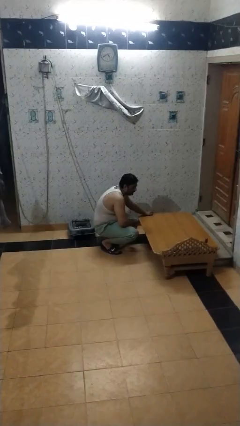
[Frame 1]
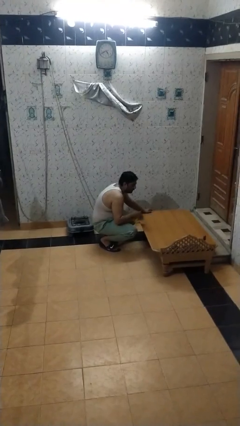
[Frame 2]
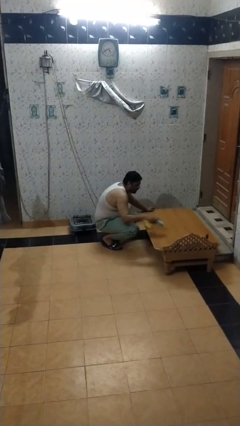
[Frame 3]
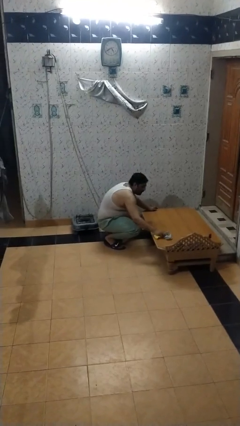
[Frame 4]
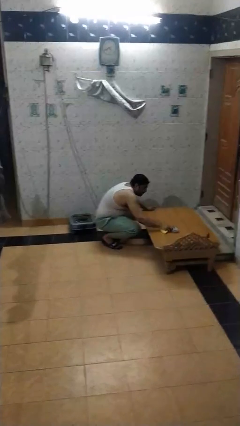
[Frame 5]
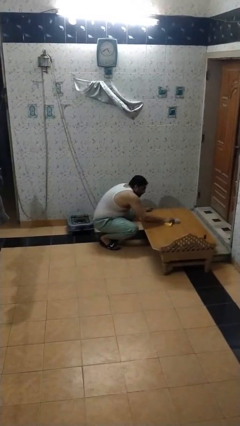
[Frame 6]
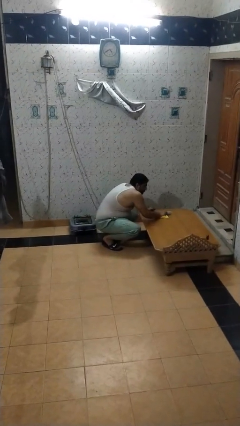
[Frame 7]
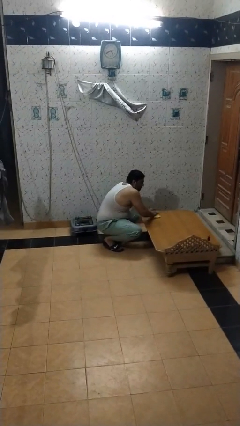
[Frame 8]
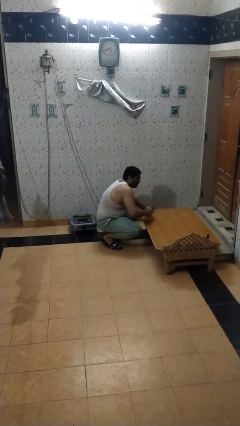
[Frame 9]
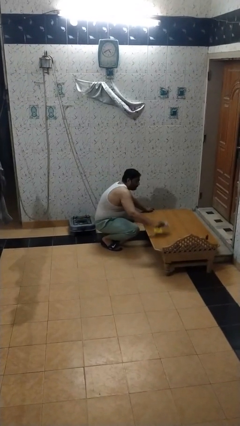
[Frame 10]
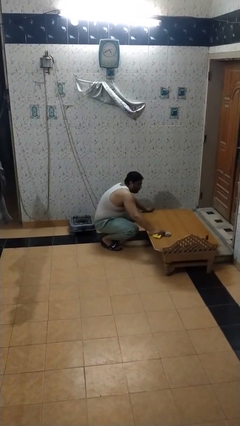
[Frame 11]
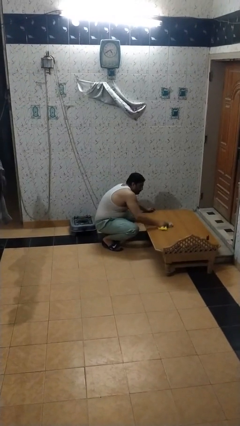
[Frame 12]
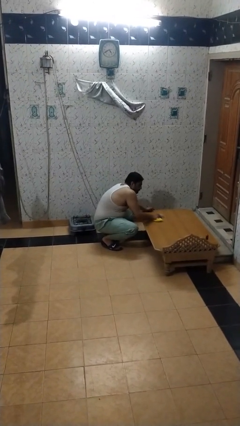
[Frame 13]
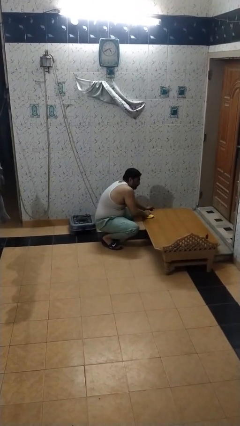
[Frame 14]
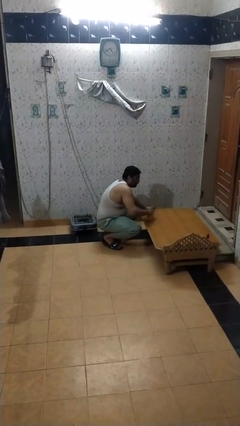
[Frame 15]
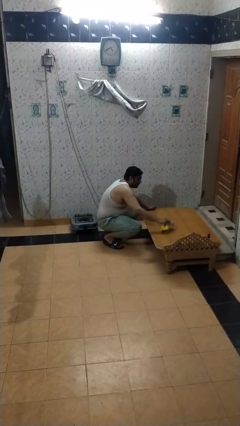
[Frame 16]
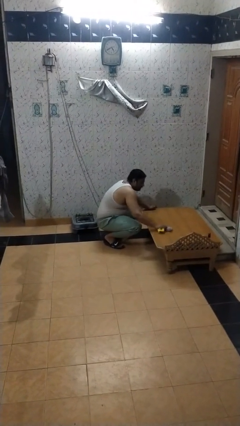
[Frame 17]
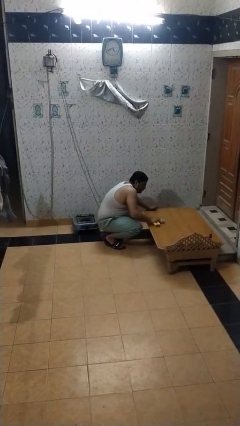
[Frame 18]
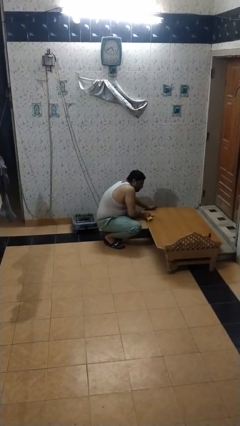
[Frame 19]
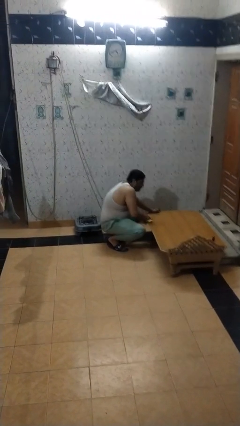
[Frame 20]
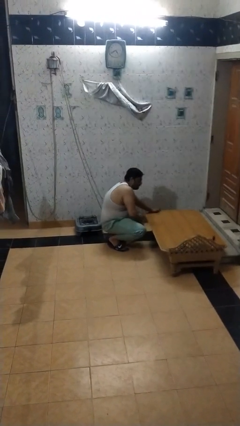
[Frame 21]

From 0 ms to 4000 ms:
person cleans table with rag

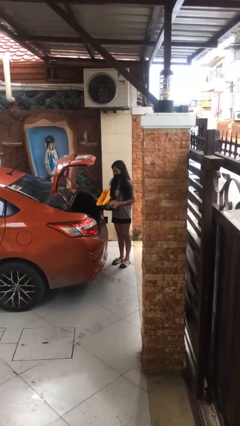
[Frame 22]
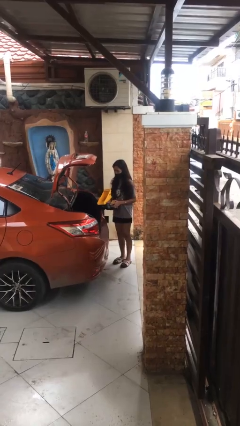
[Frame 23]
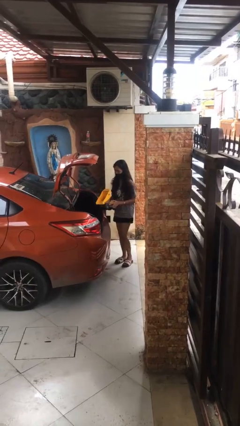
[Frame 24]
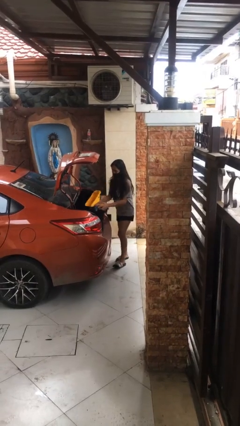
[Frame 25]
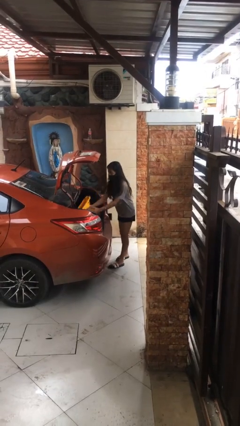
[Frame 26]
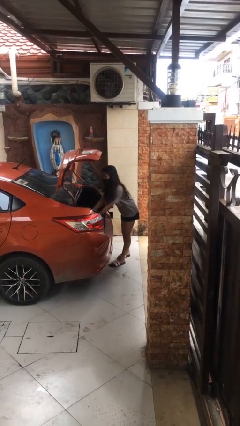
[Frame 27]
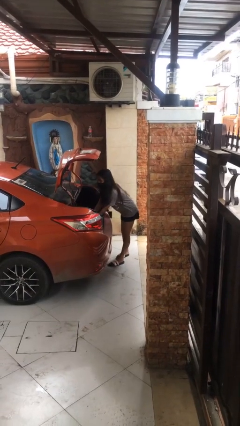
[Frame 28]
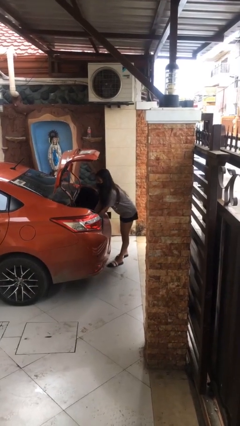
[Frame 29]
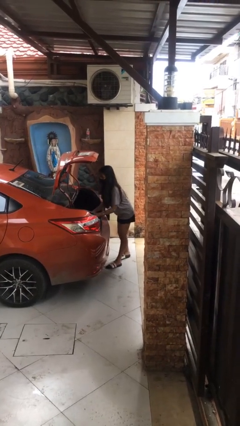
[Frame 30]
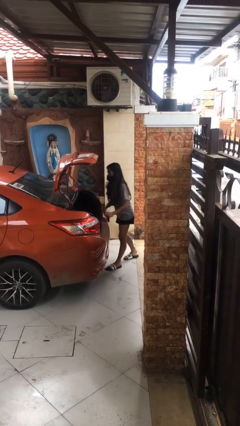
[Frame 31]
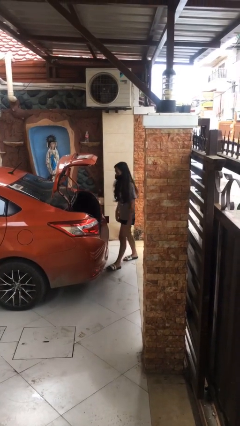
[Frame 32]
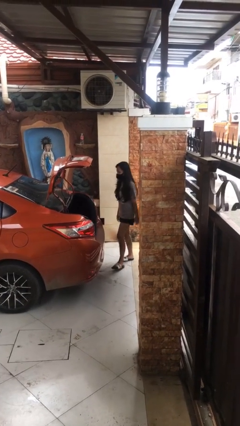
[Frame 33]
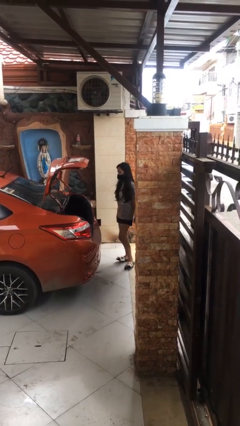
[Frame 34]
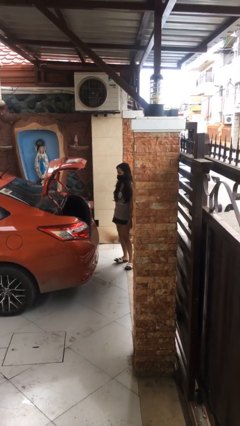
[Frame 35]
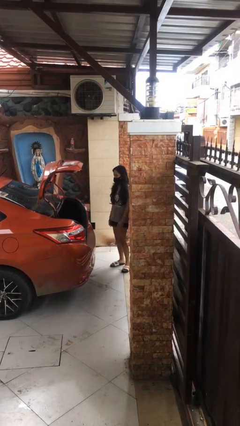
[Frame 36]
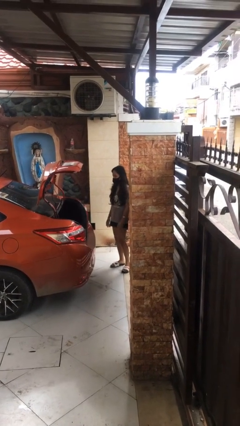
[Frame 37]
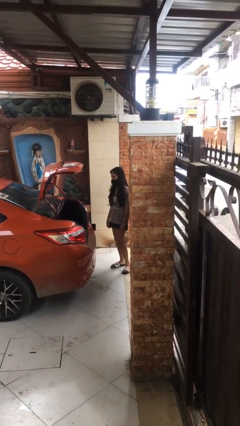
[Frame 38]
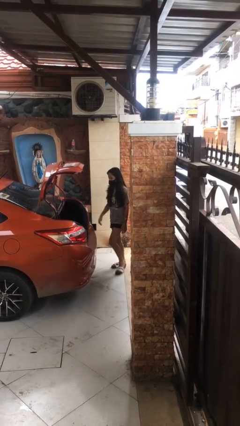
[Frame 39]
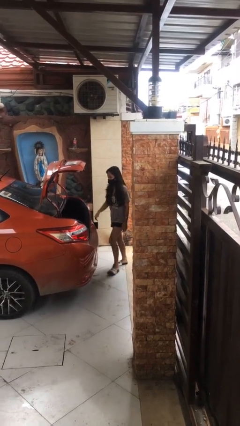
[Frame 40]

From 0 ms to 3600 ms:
person loads car

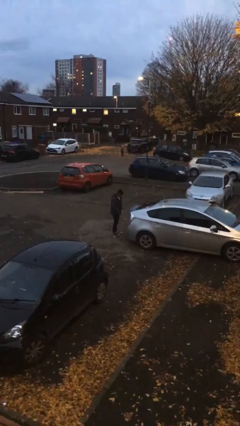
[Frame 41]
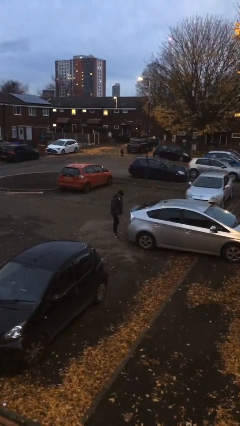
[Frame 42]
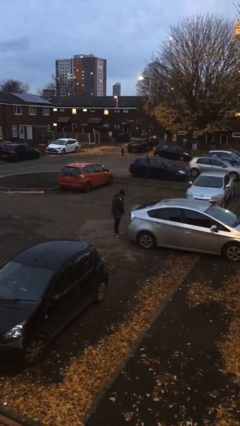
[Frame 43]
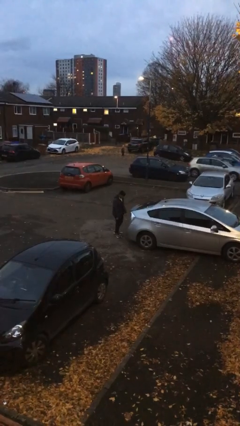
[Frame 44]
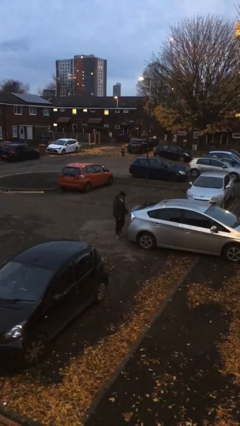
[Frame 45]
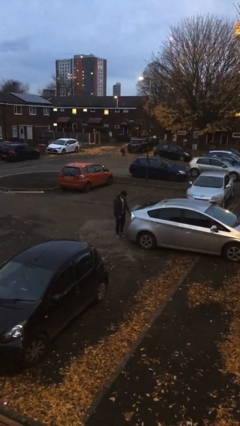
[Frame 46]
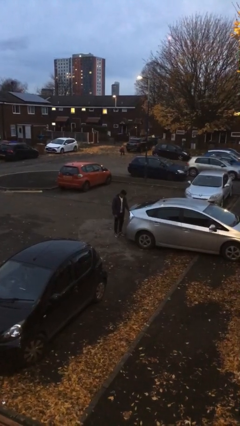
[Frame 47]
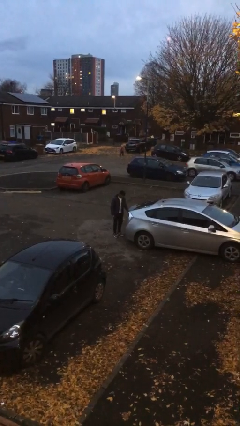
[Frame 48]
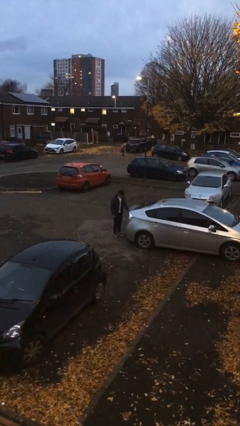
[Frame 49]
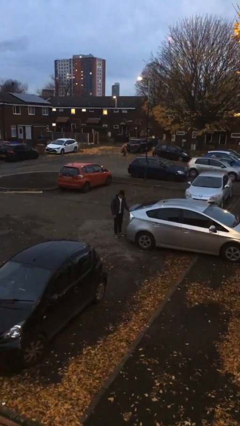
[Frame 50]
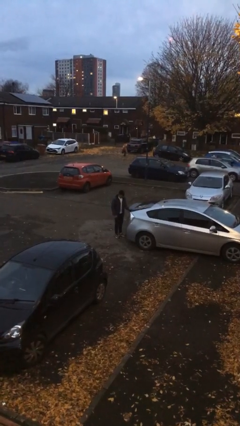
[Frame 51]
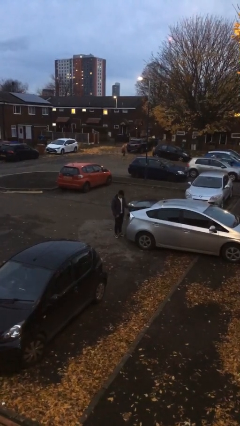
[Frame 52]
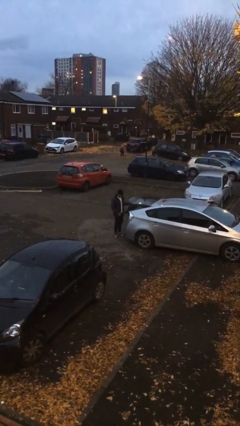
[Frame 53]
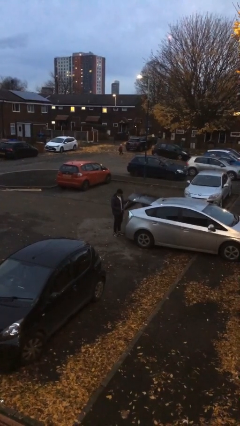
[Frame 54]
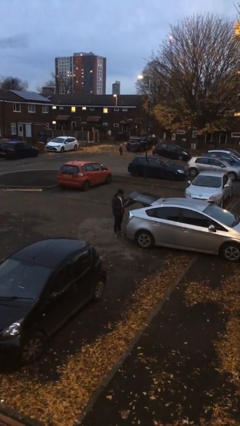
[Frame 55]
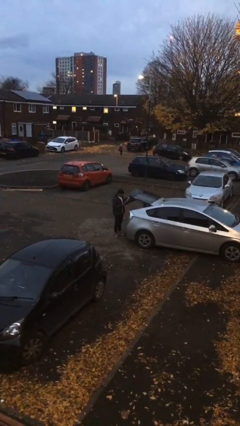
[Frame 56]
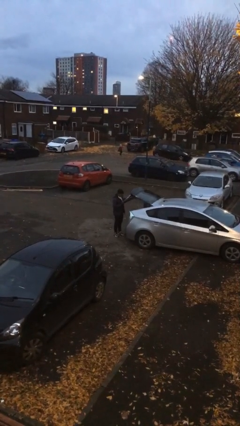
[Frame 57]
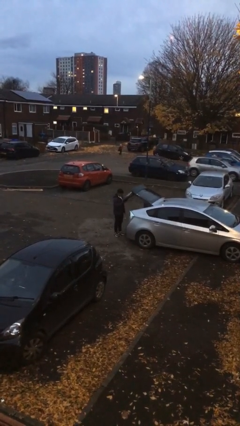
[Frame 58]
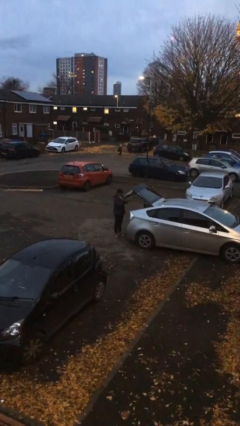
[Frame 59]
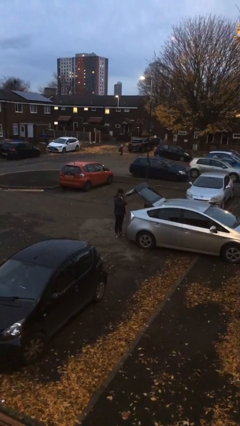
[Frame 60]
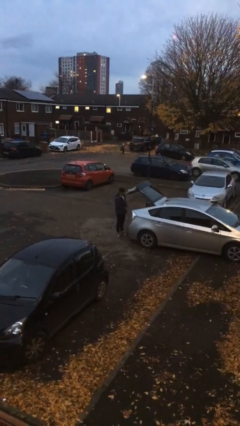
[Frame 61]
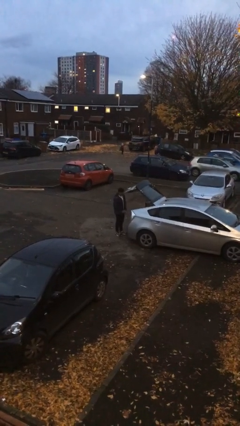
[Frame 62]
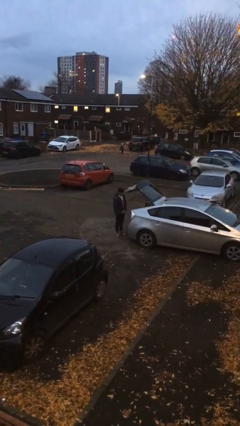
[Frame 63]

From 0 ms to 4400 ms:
person opens car trunk

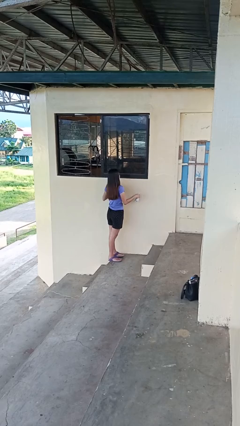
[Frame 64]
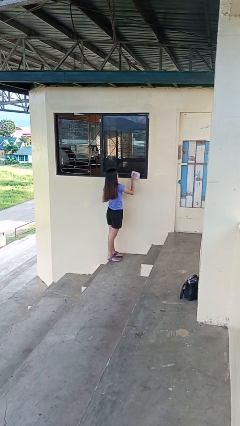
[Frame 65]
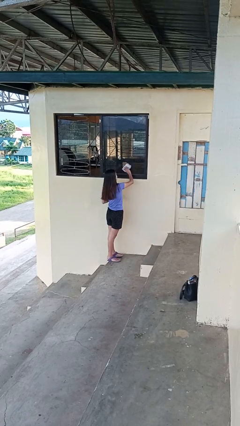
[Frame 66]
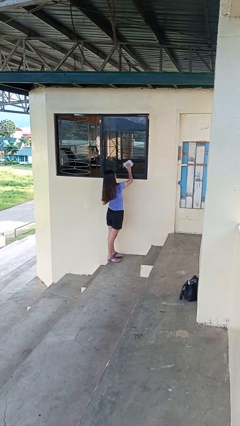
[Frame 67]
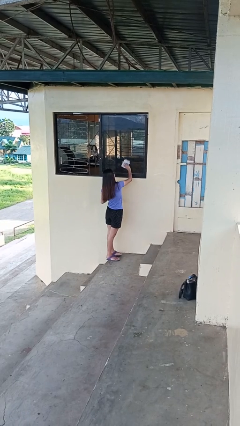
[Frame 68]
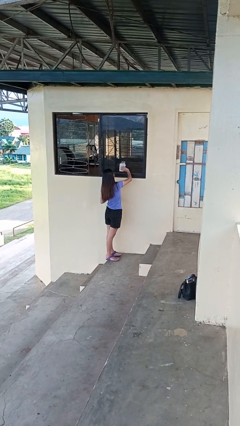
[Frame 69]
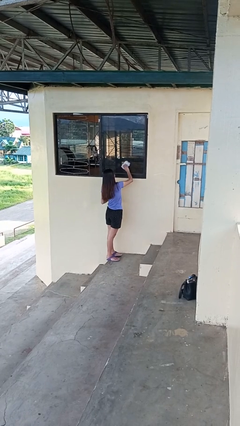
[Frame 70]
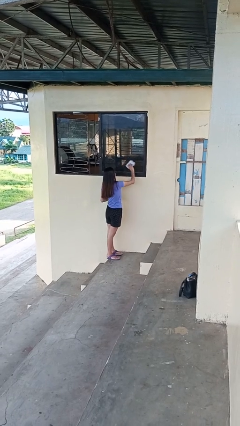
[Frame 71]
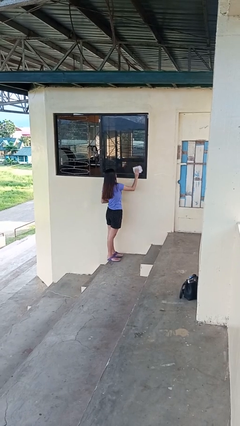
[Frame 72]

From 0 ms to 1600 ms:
person washes window

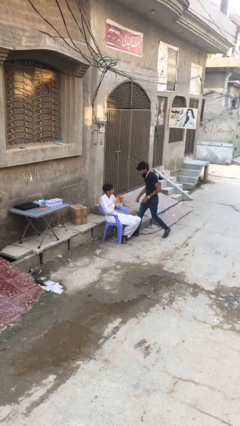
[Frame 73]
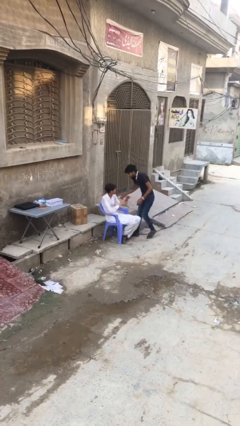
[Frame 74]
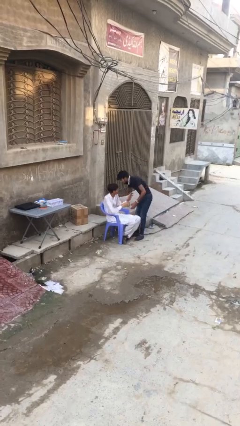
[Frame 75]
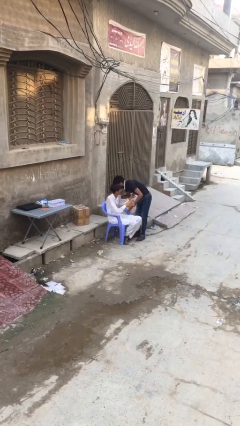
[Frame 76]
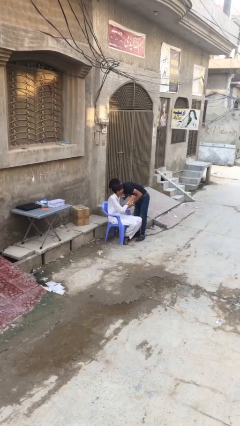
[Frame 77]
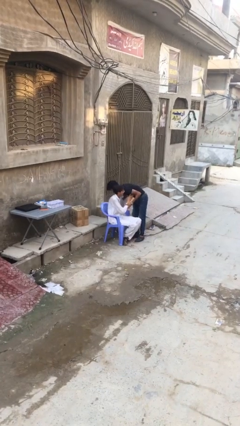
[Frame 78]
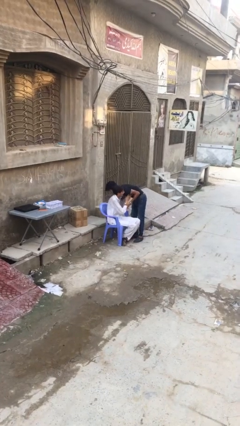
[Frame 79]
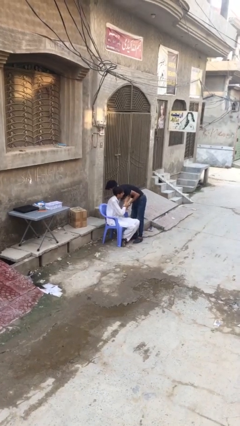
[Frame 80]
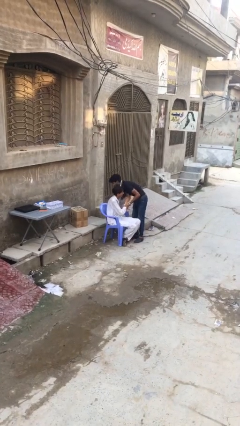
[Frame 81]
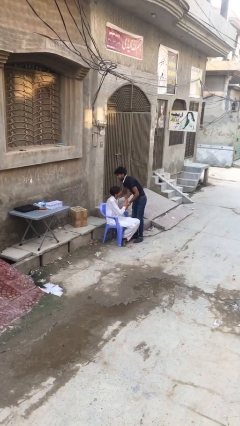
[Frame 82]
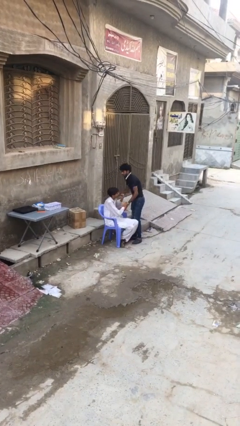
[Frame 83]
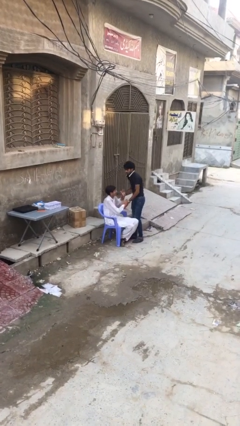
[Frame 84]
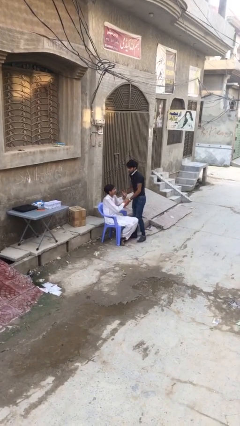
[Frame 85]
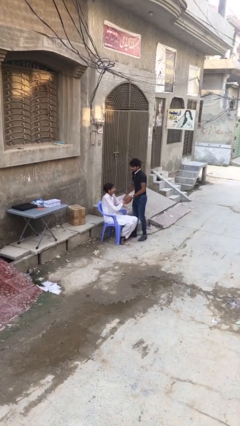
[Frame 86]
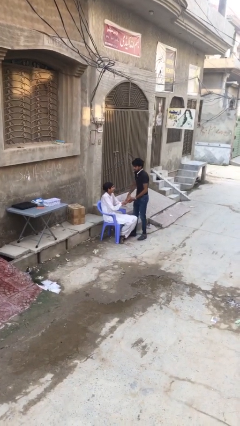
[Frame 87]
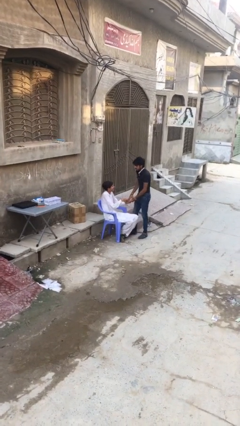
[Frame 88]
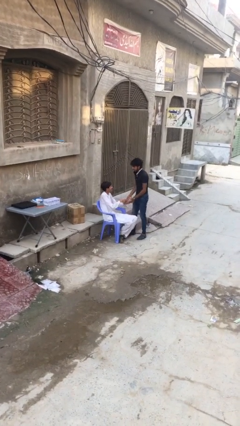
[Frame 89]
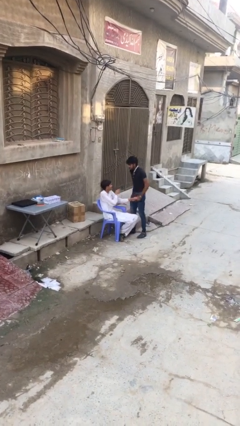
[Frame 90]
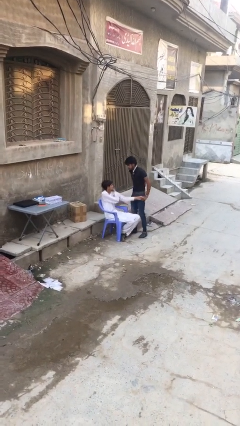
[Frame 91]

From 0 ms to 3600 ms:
person embraces person

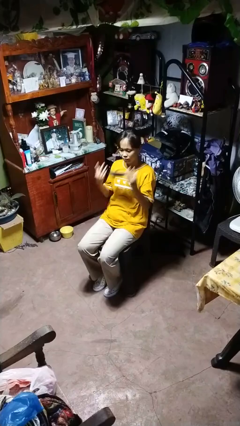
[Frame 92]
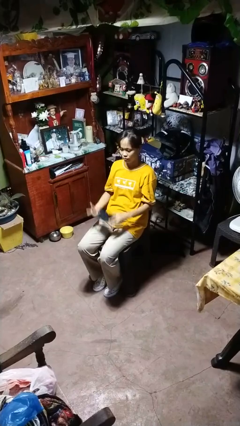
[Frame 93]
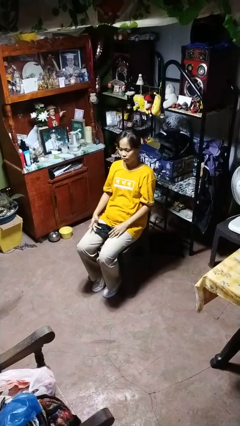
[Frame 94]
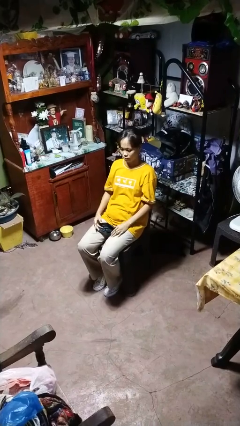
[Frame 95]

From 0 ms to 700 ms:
person takes off facemask
